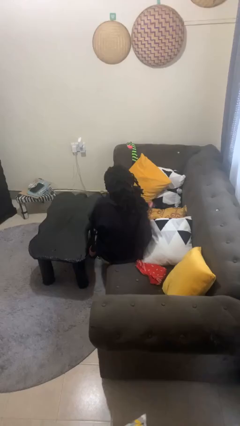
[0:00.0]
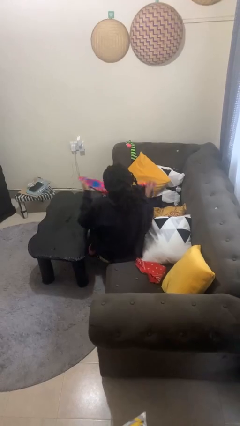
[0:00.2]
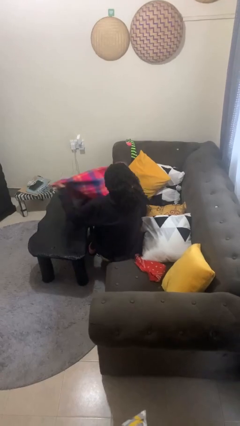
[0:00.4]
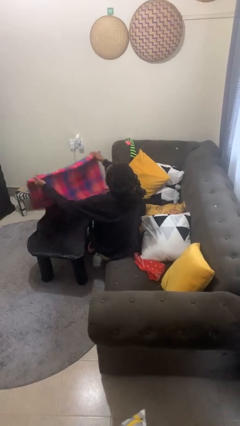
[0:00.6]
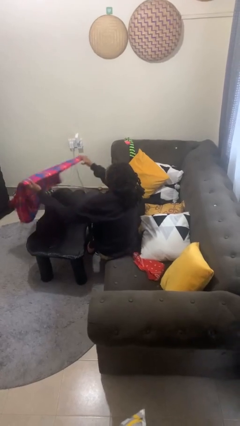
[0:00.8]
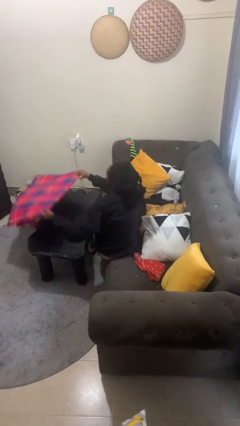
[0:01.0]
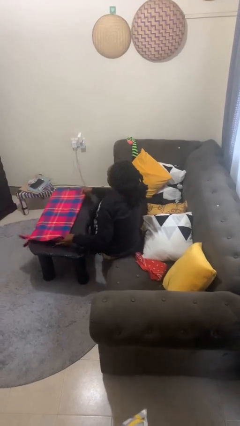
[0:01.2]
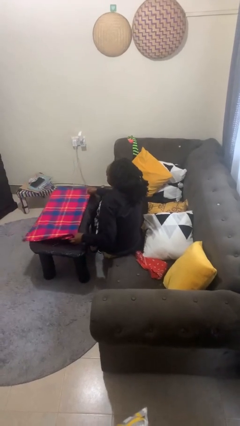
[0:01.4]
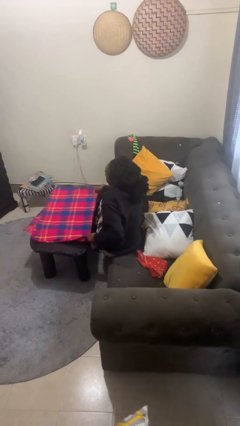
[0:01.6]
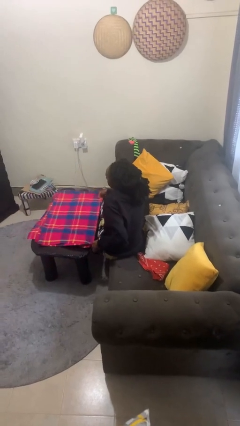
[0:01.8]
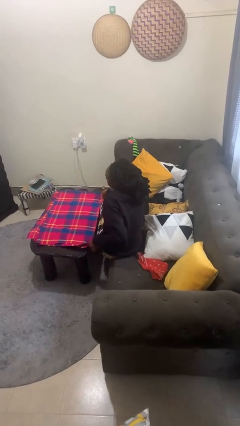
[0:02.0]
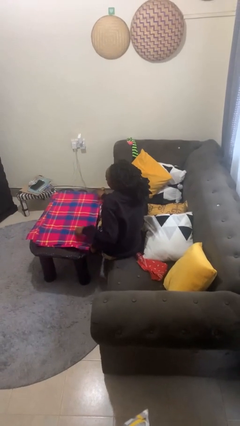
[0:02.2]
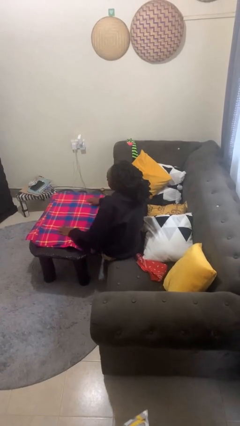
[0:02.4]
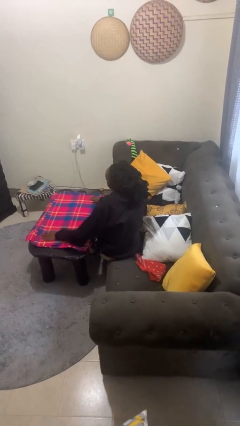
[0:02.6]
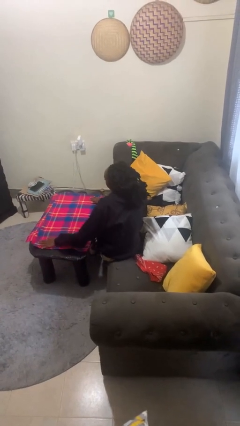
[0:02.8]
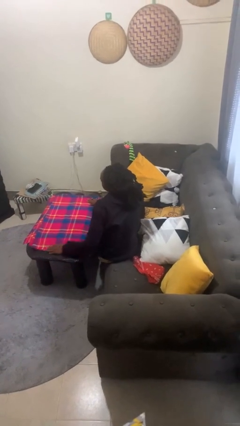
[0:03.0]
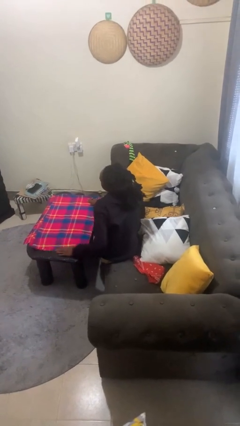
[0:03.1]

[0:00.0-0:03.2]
person spreads tablecloth

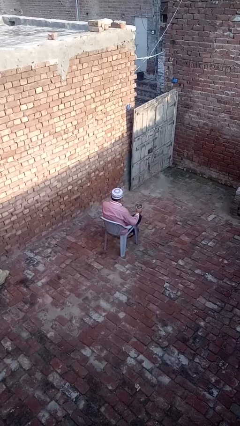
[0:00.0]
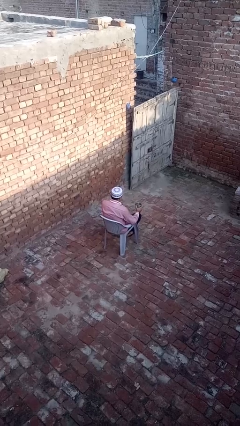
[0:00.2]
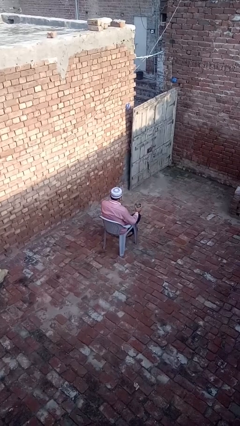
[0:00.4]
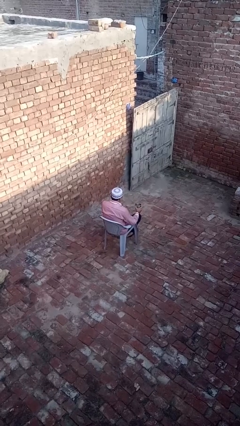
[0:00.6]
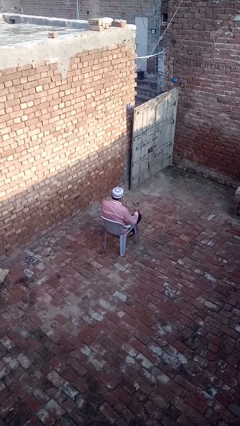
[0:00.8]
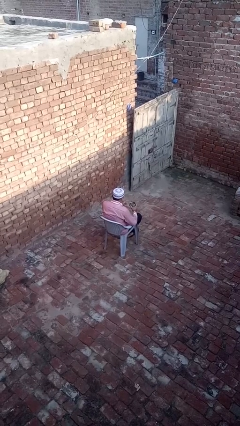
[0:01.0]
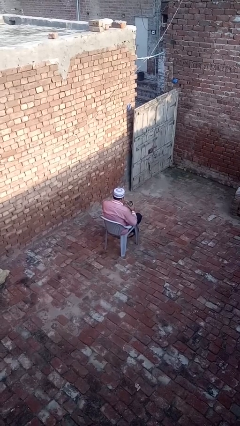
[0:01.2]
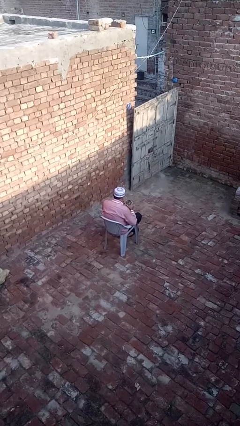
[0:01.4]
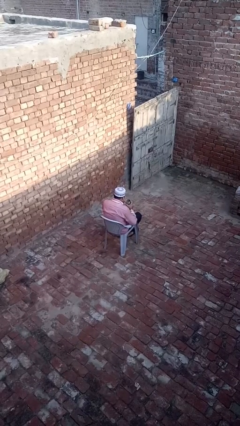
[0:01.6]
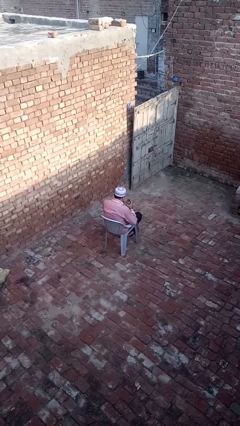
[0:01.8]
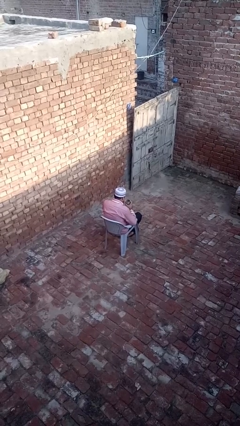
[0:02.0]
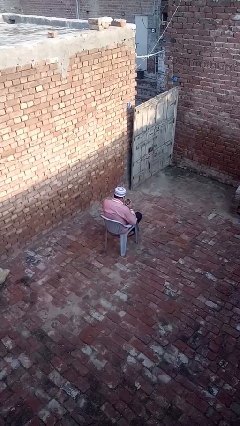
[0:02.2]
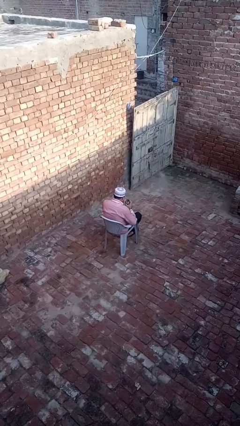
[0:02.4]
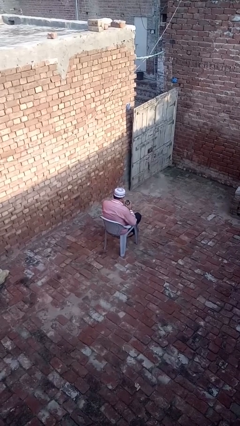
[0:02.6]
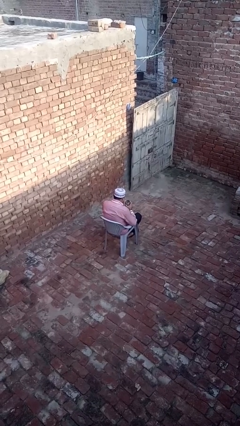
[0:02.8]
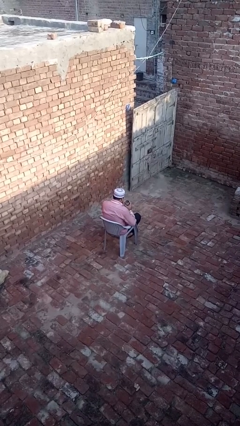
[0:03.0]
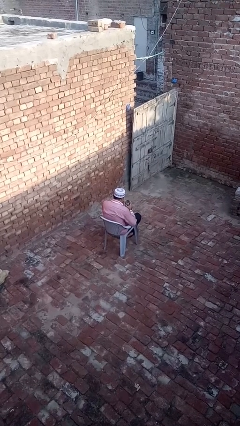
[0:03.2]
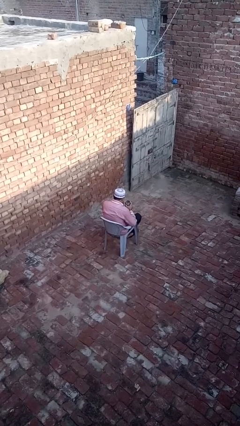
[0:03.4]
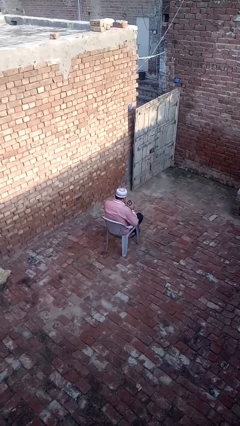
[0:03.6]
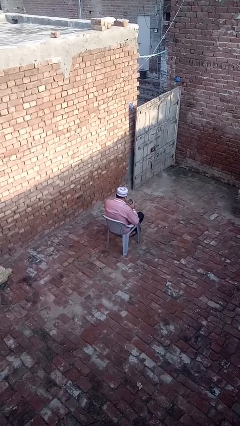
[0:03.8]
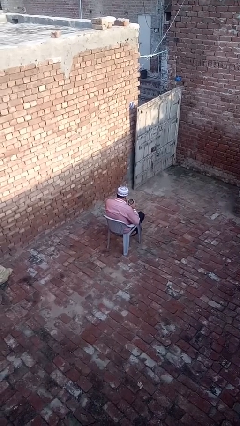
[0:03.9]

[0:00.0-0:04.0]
person drinks from straw

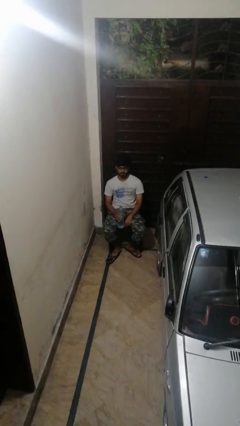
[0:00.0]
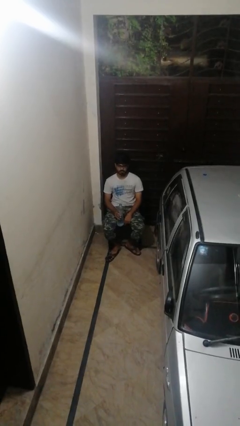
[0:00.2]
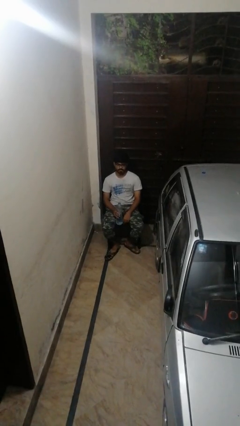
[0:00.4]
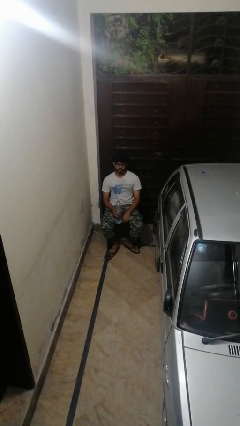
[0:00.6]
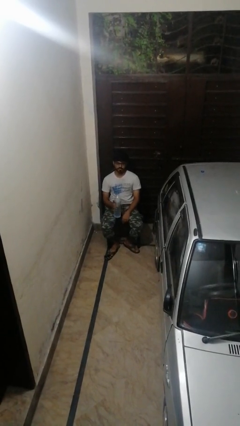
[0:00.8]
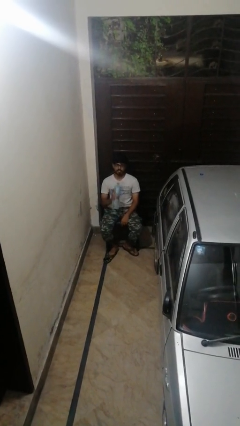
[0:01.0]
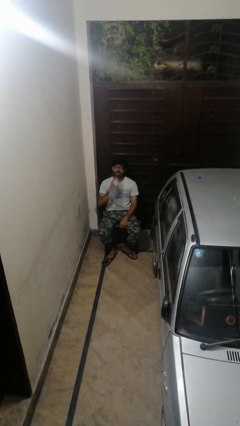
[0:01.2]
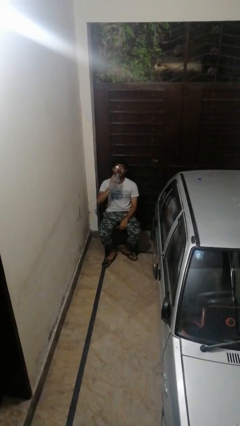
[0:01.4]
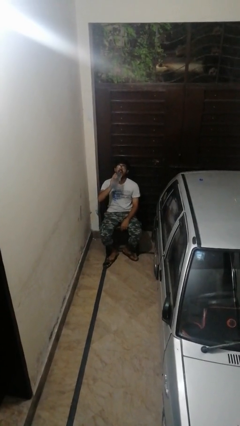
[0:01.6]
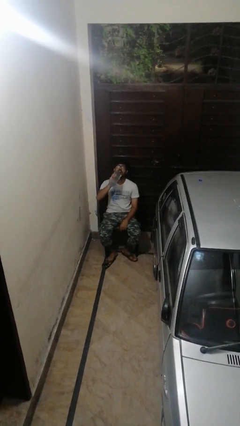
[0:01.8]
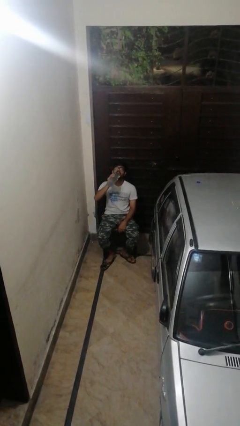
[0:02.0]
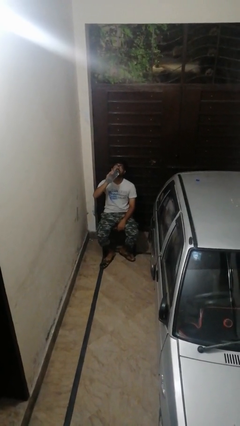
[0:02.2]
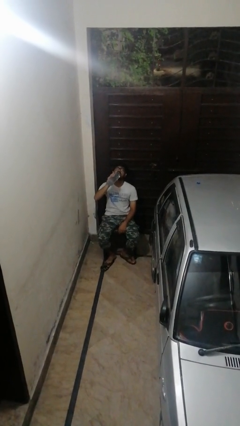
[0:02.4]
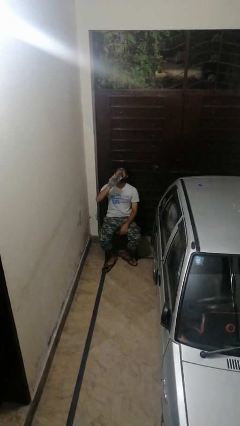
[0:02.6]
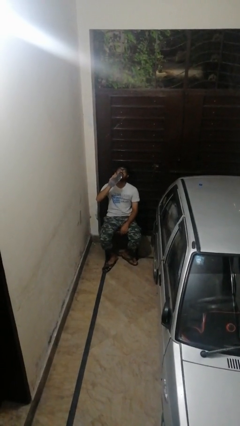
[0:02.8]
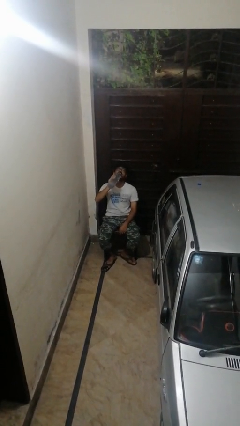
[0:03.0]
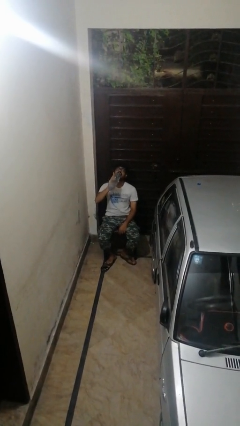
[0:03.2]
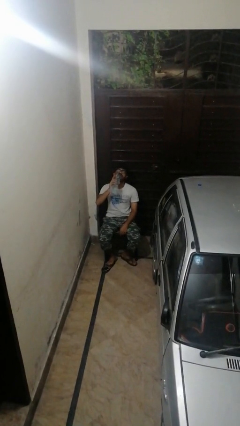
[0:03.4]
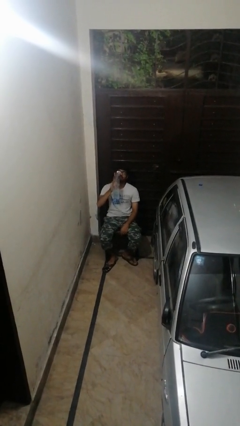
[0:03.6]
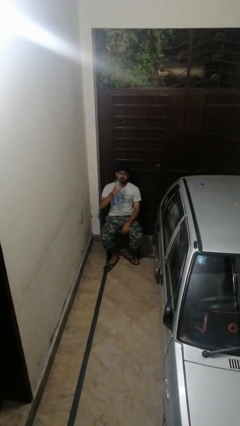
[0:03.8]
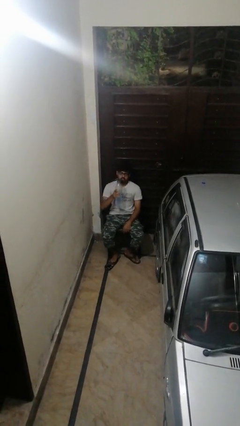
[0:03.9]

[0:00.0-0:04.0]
person drinks from bottle

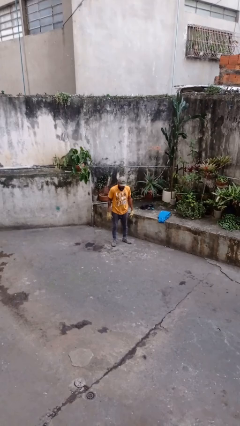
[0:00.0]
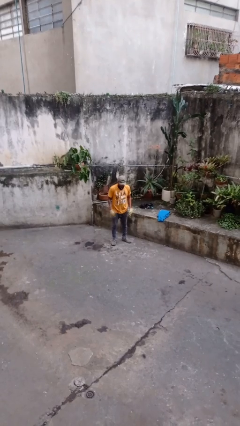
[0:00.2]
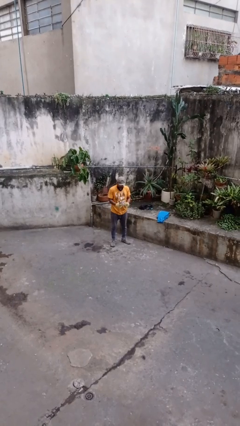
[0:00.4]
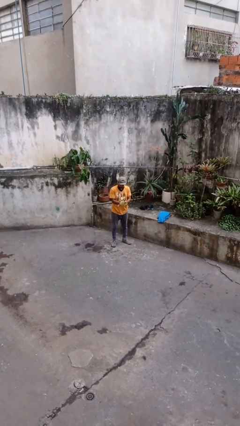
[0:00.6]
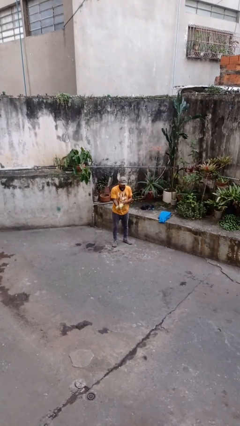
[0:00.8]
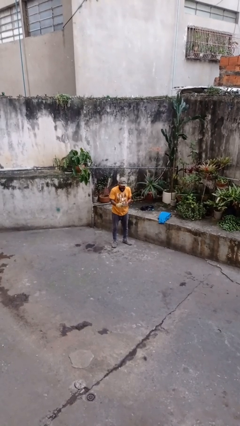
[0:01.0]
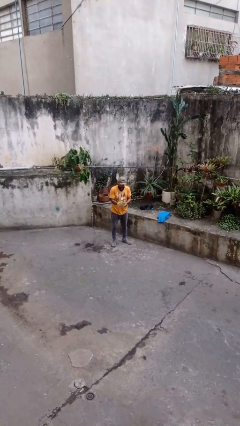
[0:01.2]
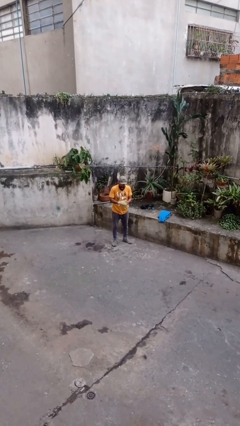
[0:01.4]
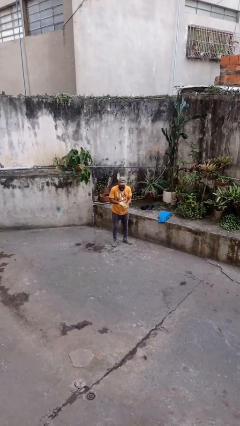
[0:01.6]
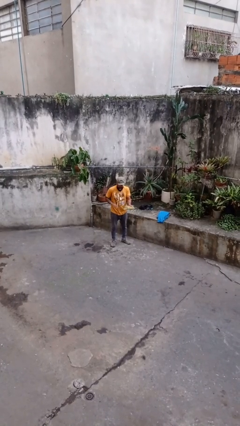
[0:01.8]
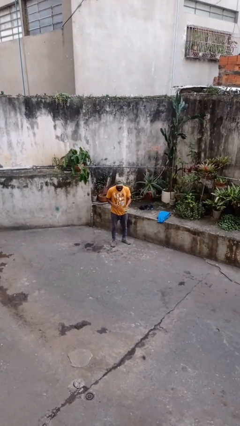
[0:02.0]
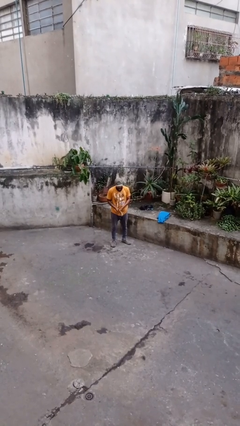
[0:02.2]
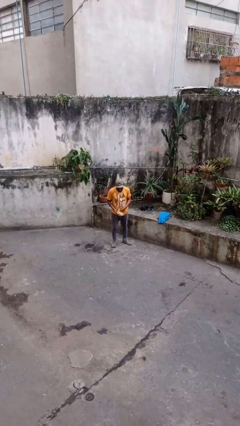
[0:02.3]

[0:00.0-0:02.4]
person takes off gloves

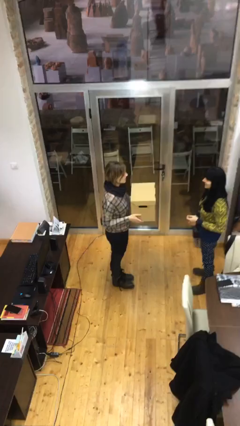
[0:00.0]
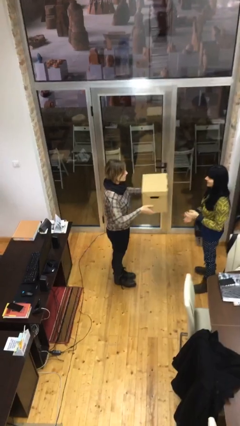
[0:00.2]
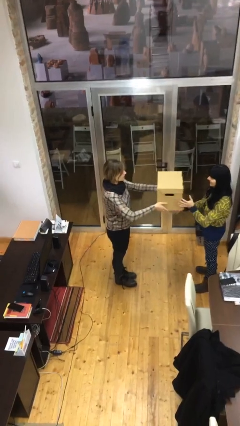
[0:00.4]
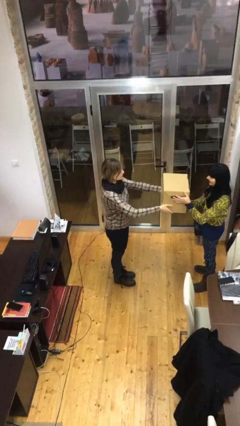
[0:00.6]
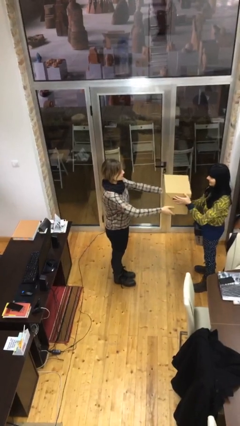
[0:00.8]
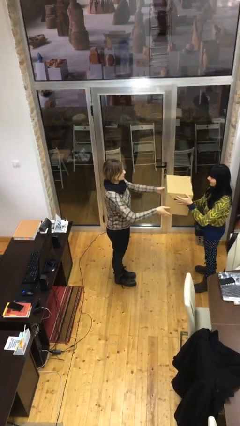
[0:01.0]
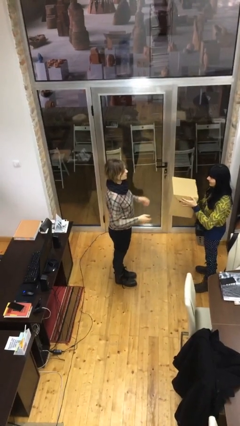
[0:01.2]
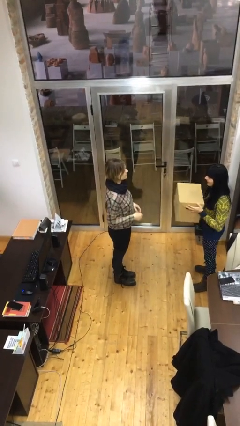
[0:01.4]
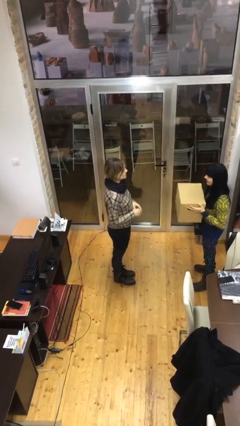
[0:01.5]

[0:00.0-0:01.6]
person transfers object to person

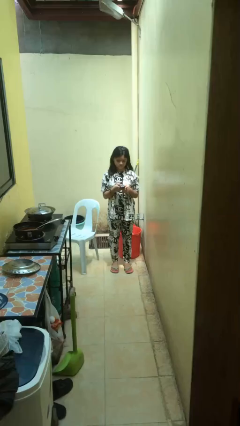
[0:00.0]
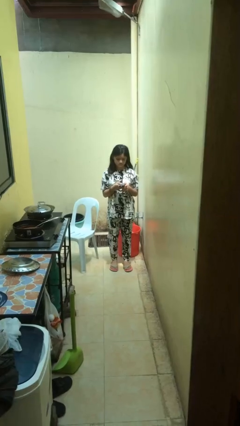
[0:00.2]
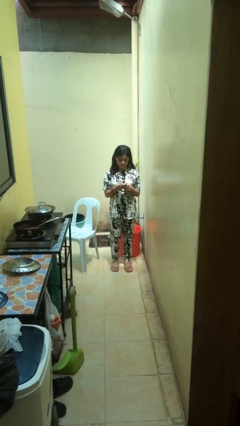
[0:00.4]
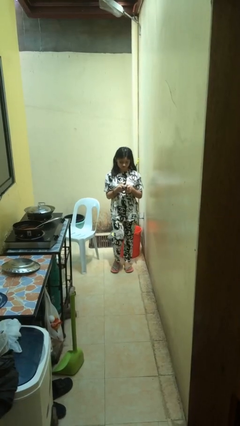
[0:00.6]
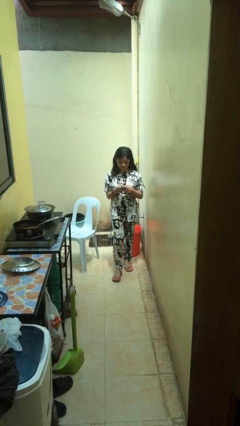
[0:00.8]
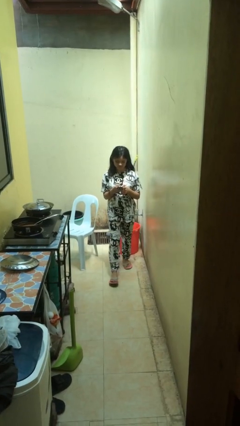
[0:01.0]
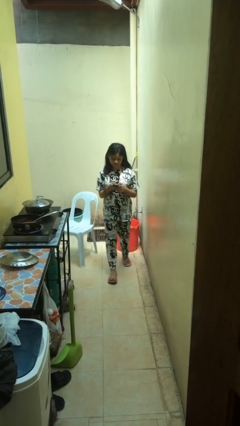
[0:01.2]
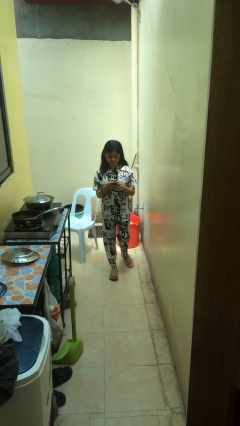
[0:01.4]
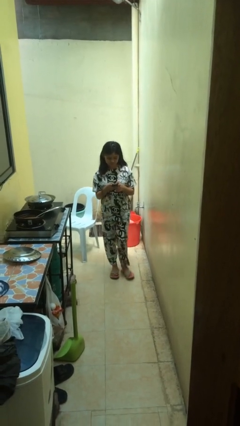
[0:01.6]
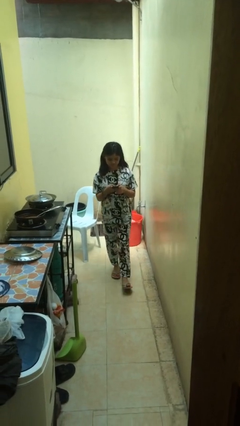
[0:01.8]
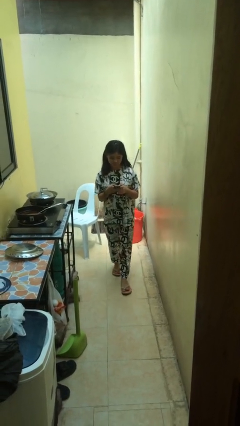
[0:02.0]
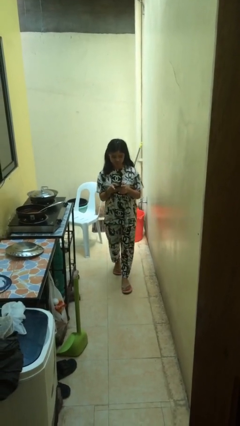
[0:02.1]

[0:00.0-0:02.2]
person texts on phone
